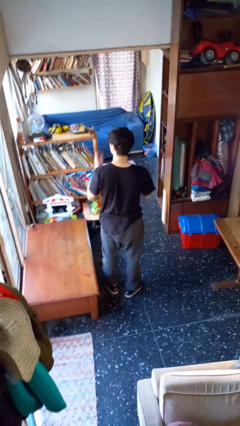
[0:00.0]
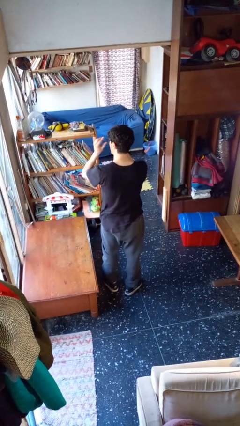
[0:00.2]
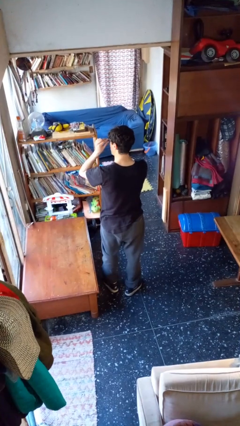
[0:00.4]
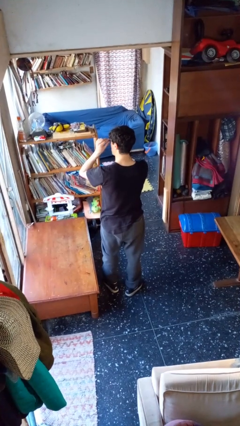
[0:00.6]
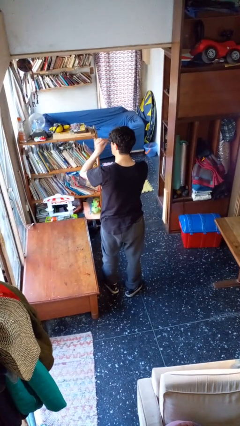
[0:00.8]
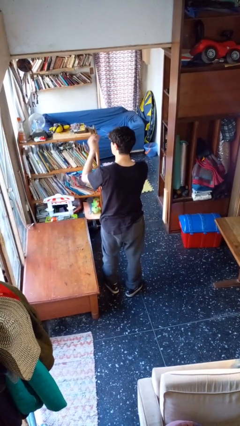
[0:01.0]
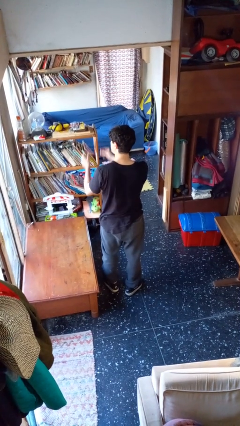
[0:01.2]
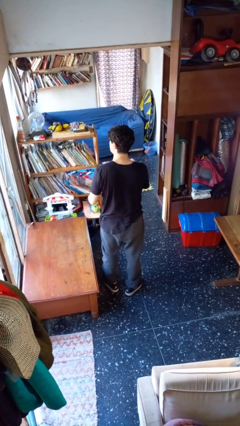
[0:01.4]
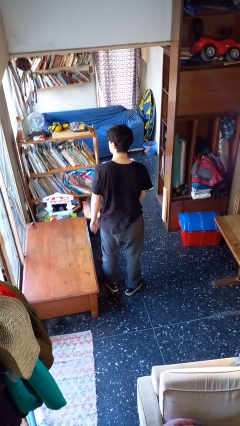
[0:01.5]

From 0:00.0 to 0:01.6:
person takes off glasses

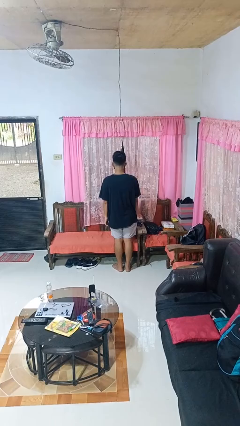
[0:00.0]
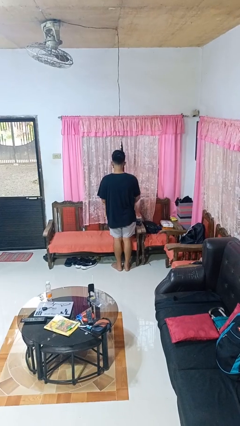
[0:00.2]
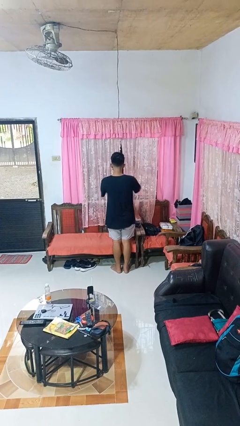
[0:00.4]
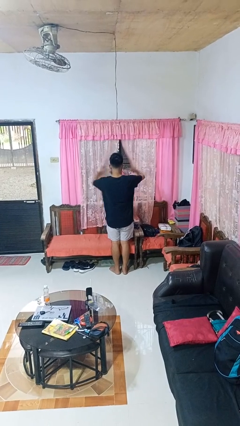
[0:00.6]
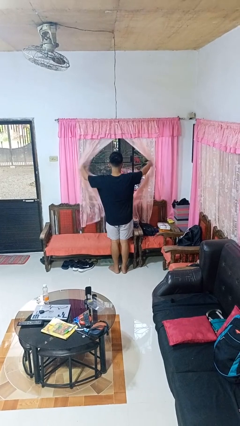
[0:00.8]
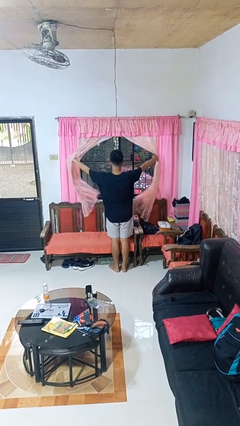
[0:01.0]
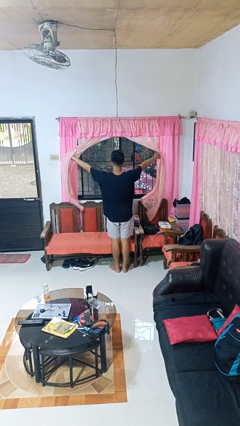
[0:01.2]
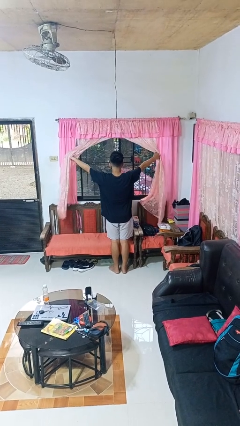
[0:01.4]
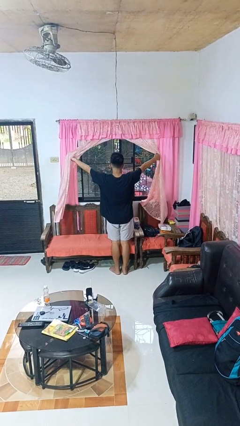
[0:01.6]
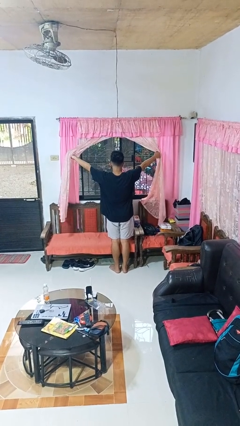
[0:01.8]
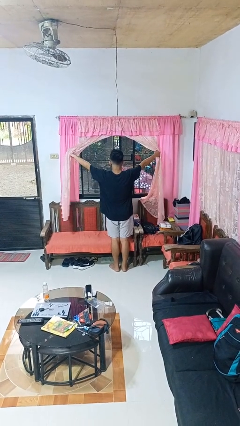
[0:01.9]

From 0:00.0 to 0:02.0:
person opens curtains

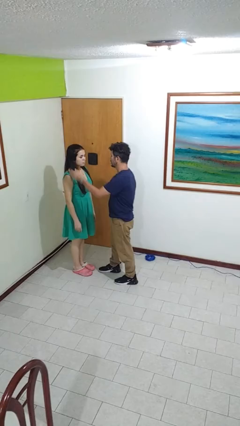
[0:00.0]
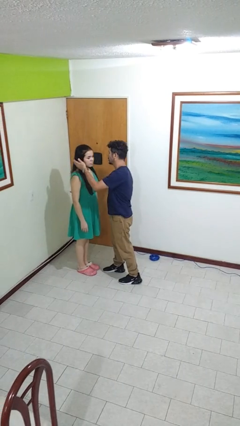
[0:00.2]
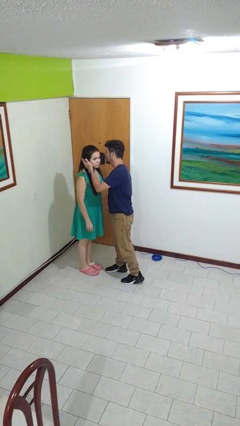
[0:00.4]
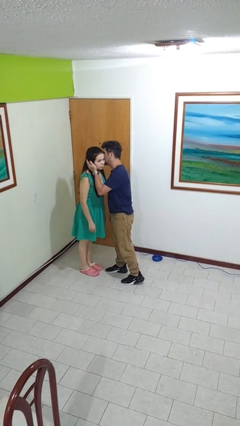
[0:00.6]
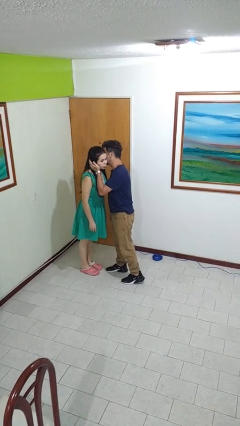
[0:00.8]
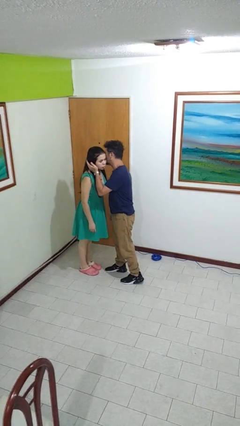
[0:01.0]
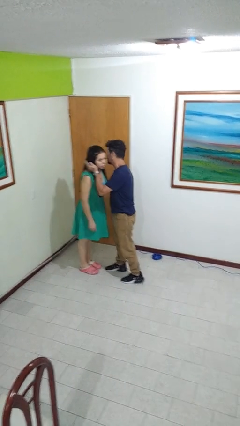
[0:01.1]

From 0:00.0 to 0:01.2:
person kisses cheek of person

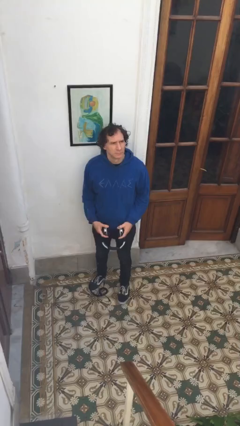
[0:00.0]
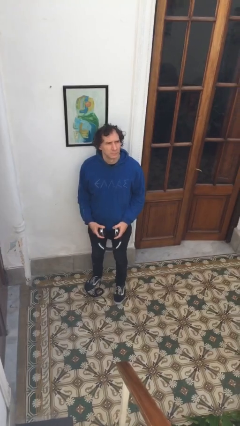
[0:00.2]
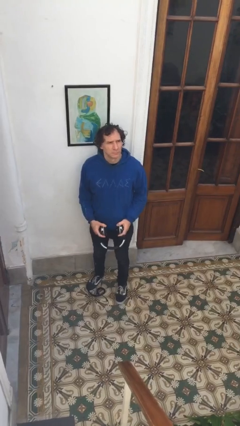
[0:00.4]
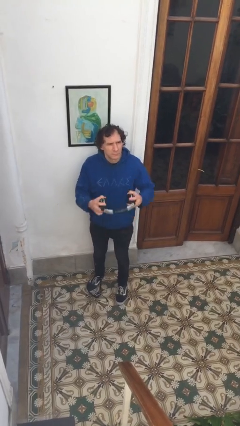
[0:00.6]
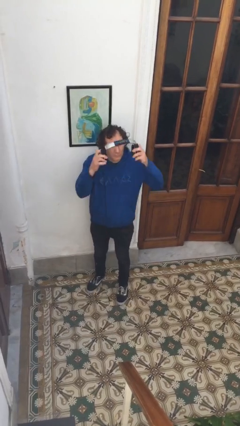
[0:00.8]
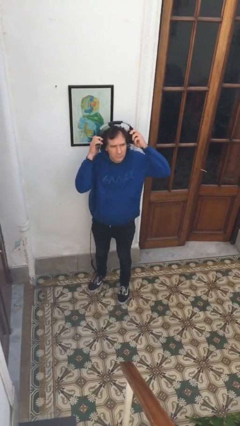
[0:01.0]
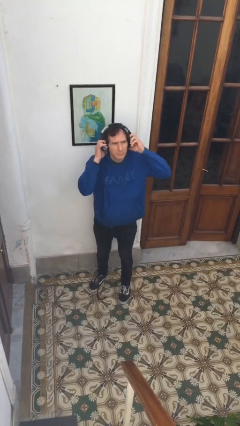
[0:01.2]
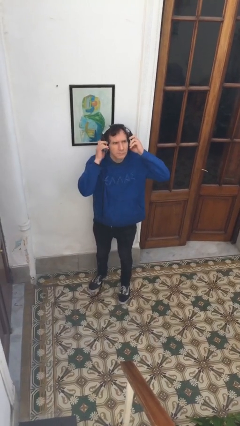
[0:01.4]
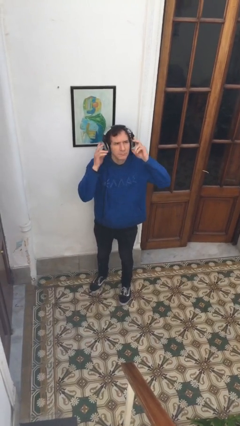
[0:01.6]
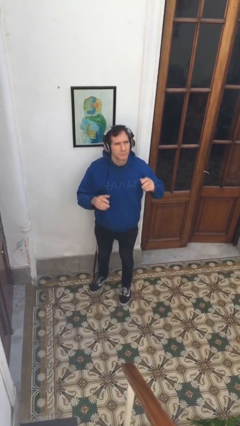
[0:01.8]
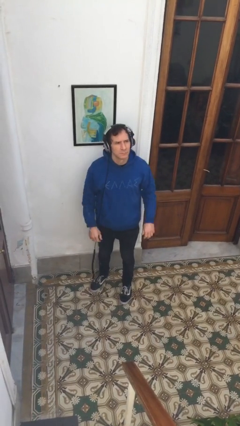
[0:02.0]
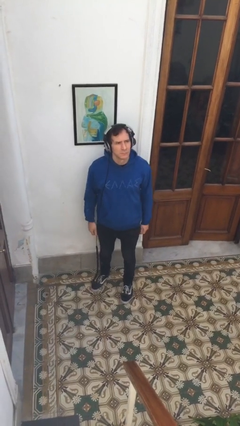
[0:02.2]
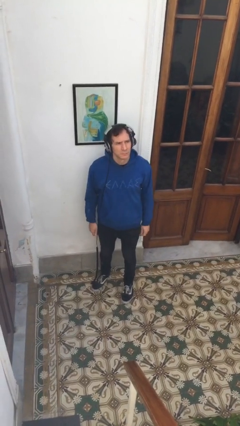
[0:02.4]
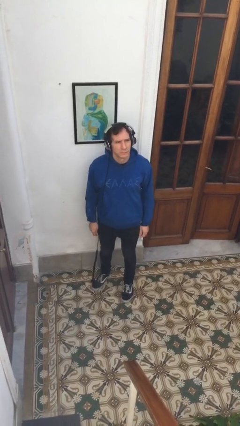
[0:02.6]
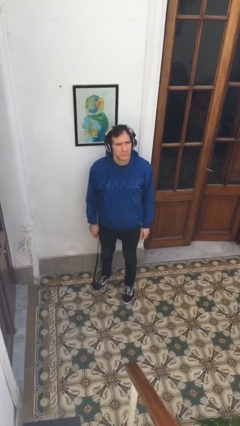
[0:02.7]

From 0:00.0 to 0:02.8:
person puts on headphones

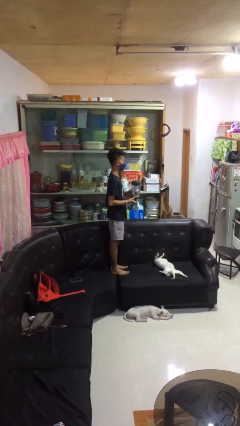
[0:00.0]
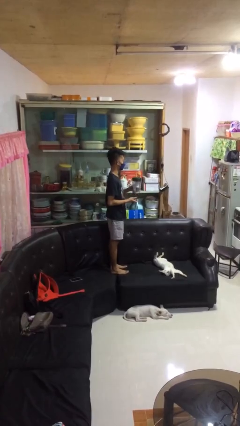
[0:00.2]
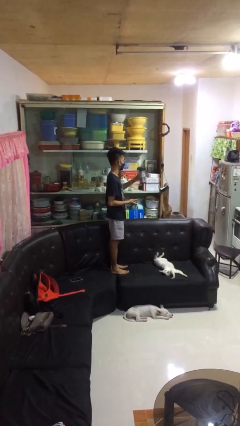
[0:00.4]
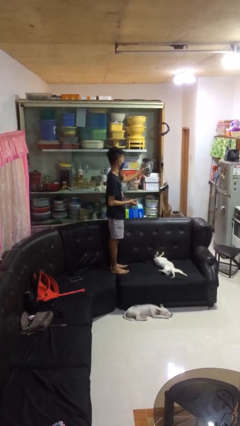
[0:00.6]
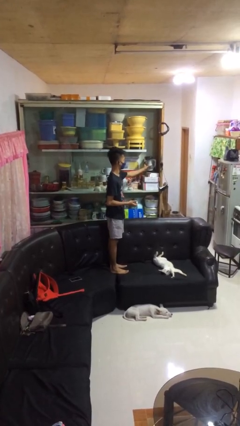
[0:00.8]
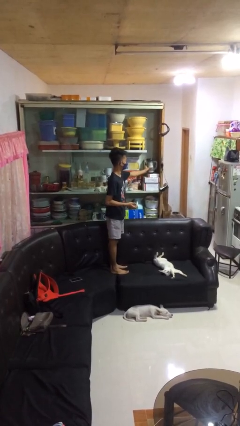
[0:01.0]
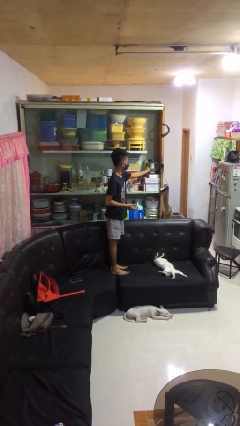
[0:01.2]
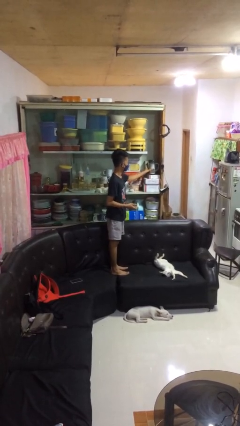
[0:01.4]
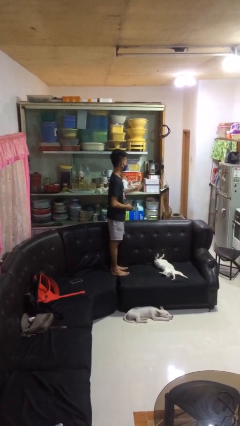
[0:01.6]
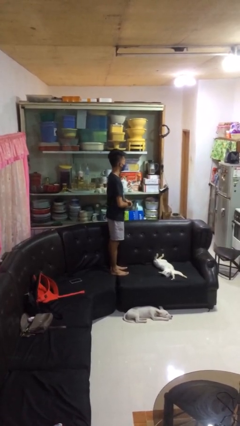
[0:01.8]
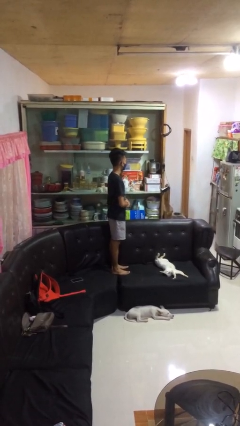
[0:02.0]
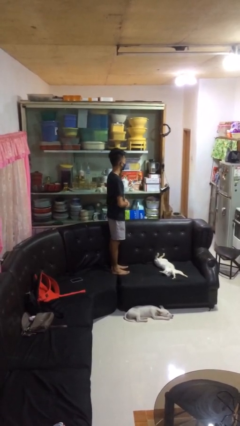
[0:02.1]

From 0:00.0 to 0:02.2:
person puts down object into cabinet

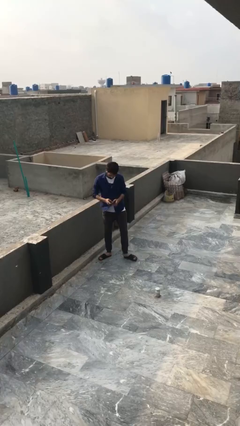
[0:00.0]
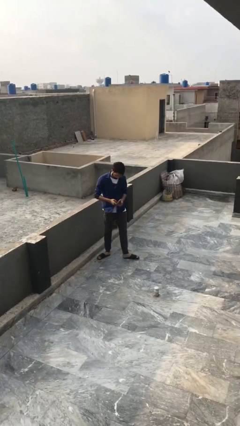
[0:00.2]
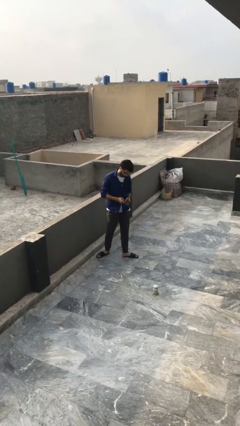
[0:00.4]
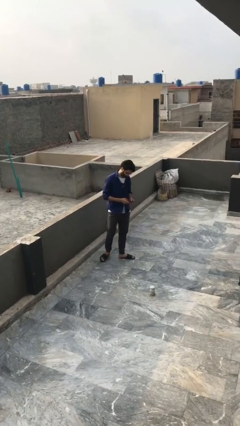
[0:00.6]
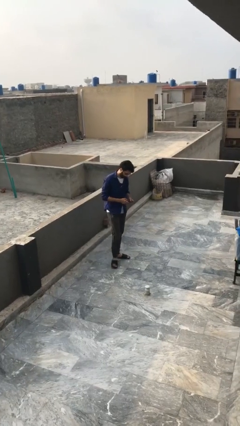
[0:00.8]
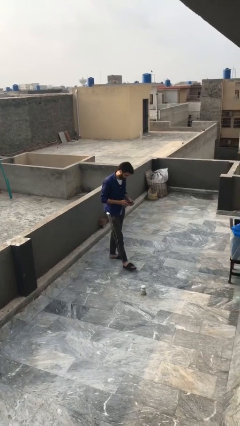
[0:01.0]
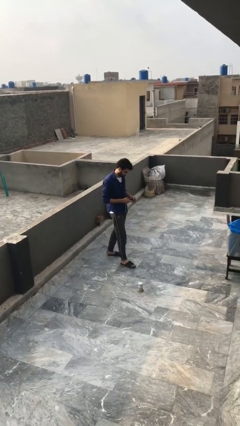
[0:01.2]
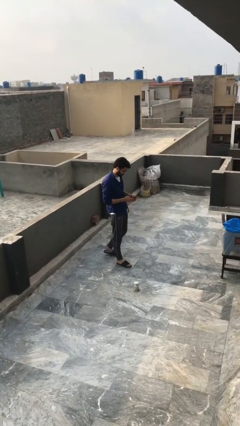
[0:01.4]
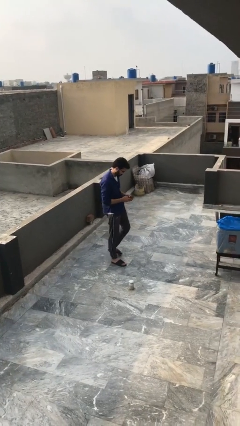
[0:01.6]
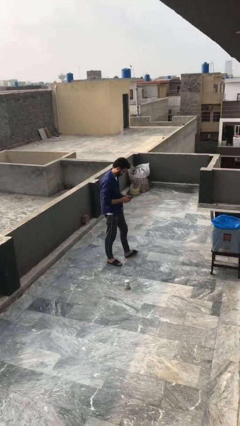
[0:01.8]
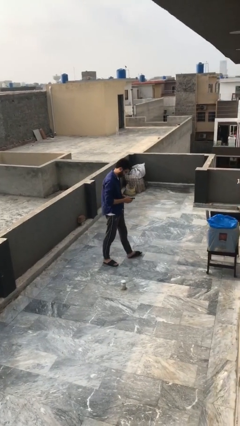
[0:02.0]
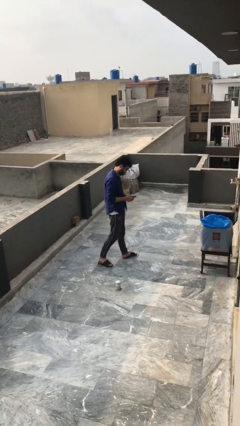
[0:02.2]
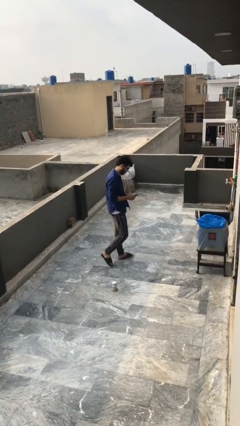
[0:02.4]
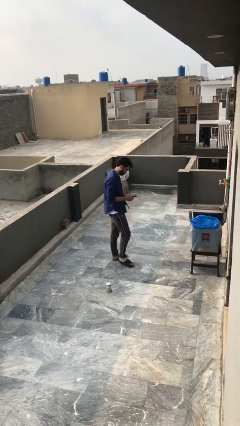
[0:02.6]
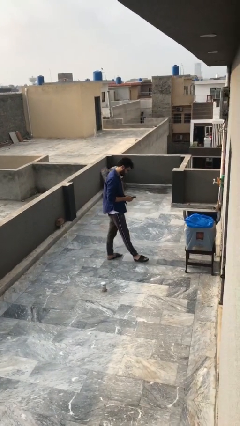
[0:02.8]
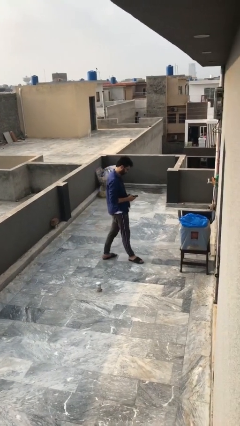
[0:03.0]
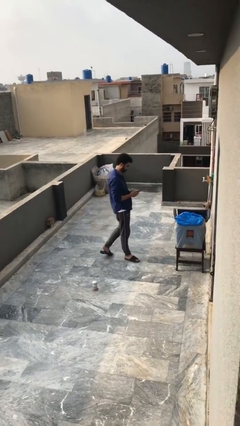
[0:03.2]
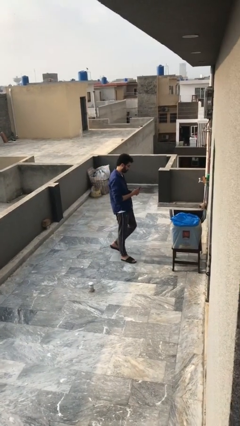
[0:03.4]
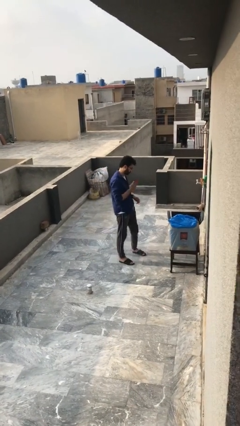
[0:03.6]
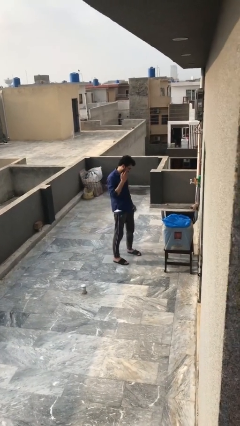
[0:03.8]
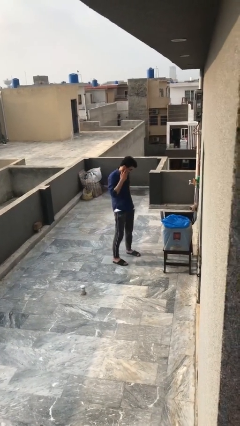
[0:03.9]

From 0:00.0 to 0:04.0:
person texts on phone

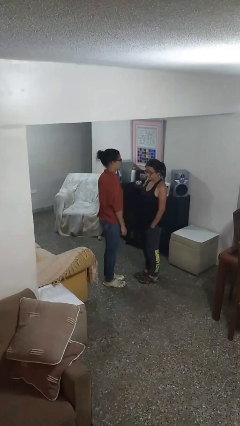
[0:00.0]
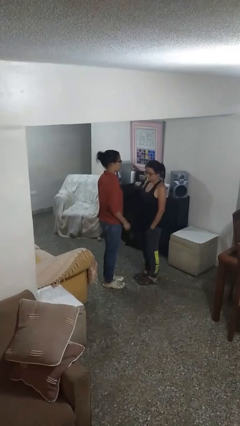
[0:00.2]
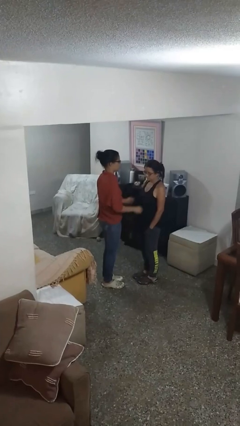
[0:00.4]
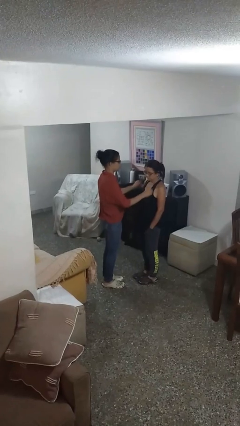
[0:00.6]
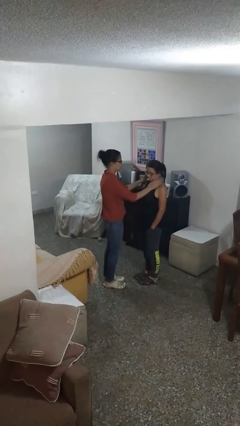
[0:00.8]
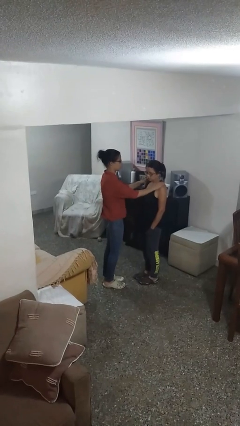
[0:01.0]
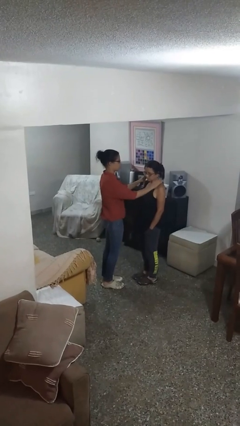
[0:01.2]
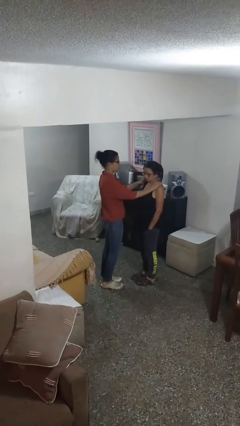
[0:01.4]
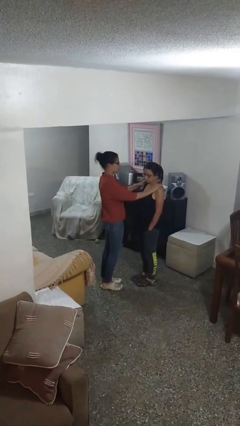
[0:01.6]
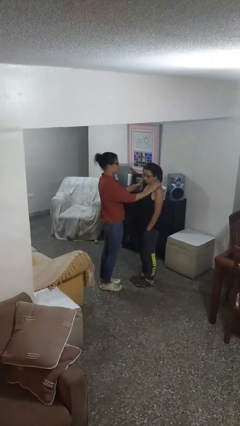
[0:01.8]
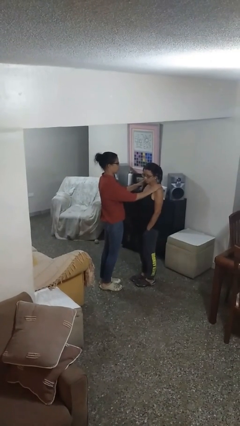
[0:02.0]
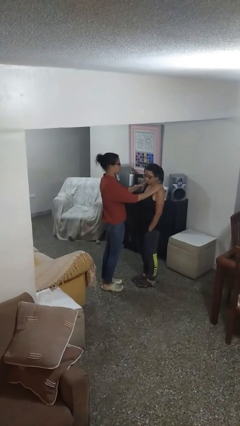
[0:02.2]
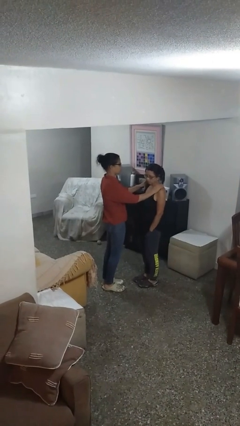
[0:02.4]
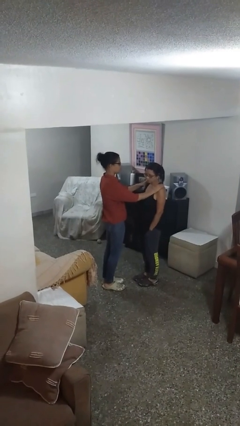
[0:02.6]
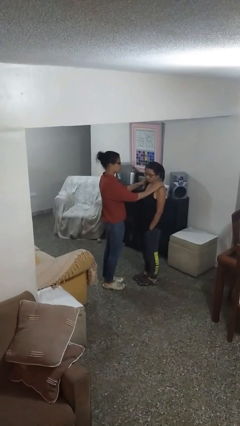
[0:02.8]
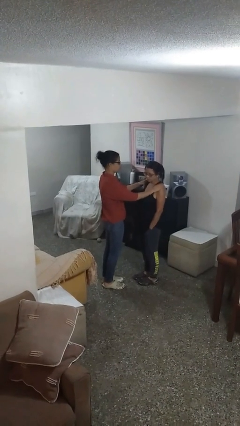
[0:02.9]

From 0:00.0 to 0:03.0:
person pounds shoulders of person
